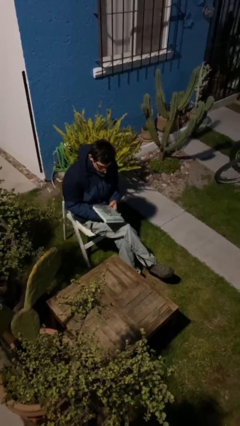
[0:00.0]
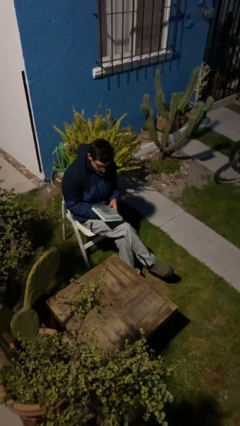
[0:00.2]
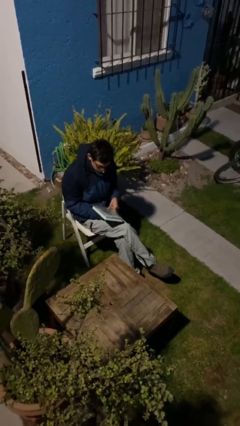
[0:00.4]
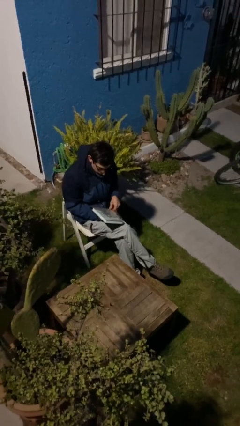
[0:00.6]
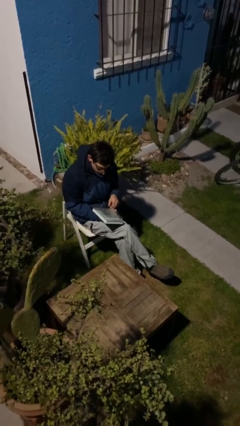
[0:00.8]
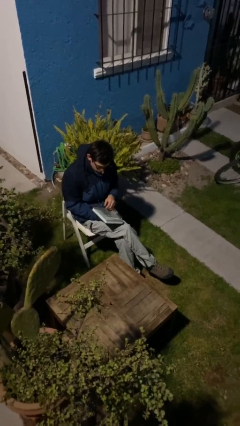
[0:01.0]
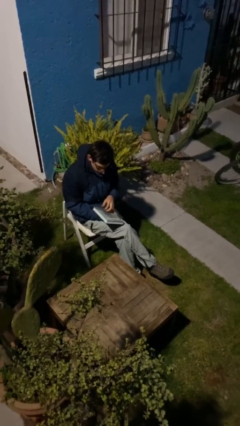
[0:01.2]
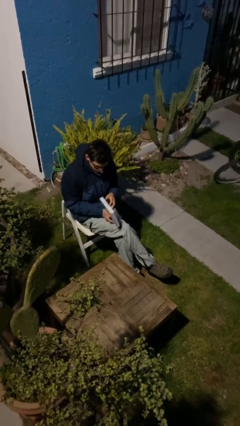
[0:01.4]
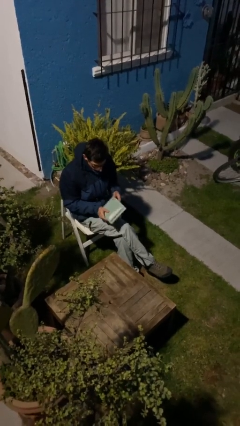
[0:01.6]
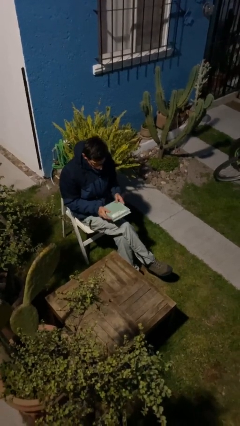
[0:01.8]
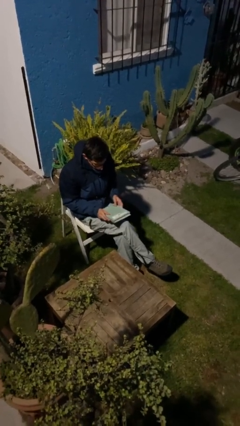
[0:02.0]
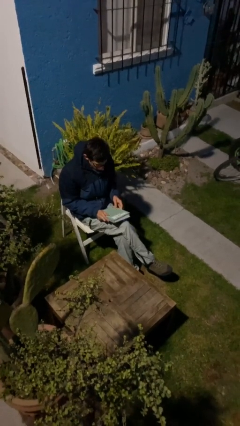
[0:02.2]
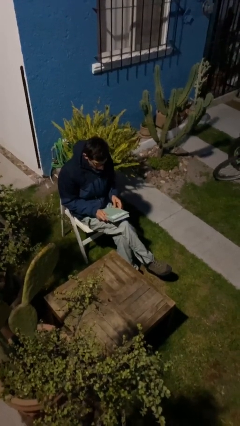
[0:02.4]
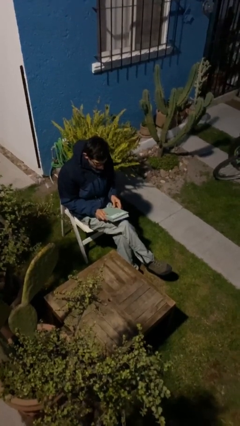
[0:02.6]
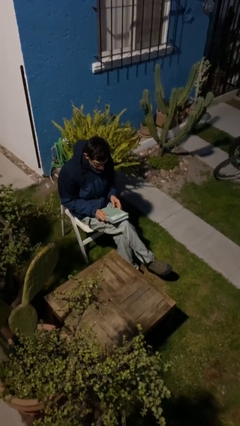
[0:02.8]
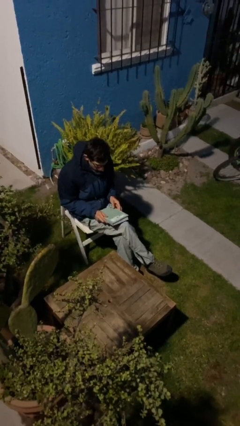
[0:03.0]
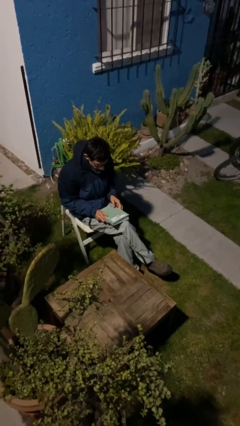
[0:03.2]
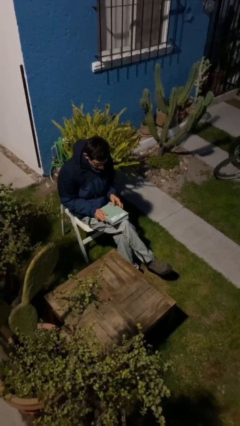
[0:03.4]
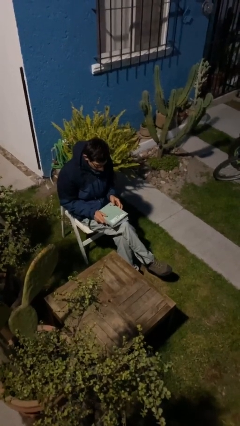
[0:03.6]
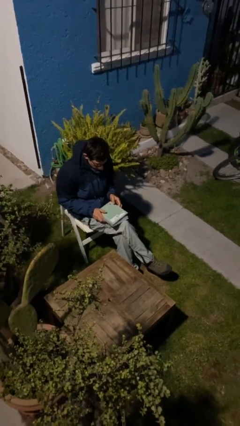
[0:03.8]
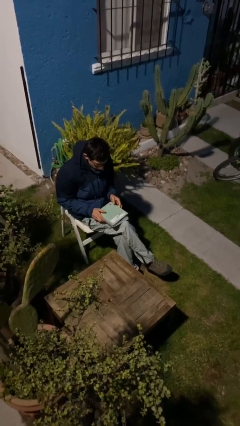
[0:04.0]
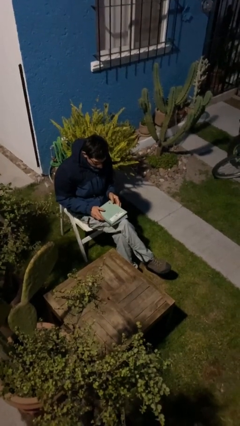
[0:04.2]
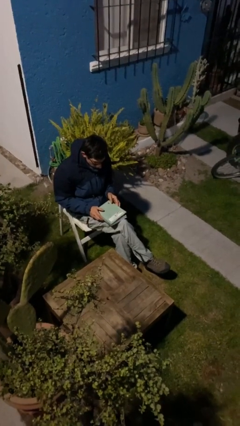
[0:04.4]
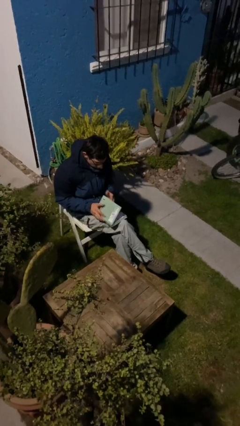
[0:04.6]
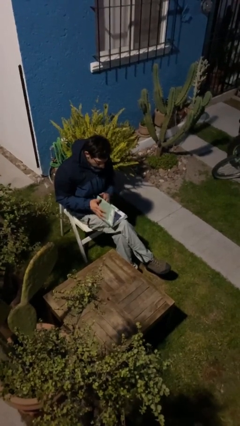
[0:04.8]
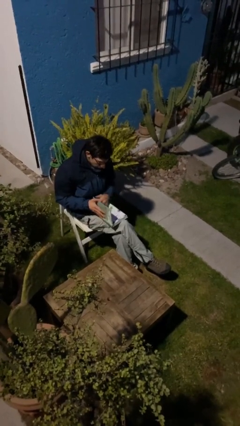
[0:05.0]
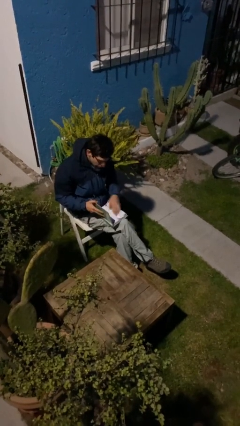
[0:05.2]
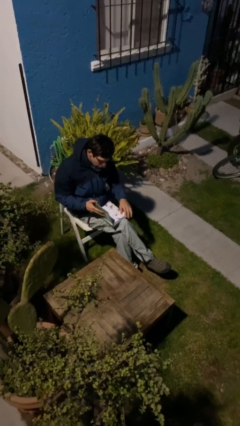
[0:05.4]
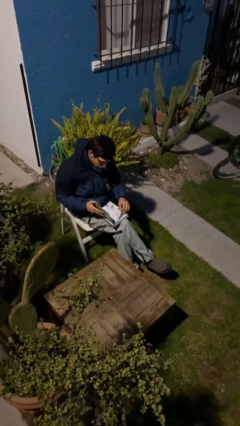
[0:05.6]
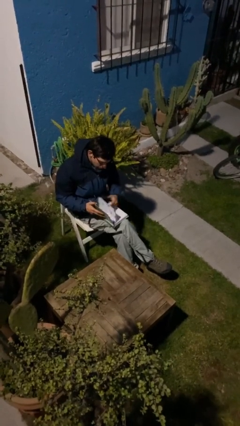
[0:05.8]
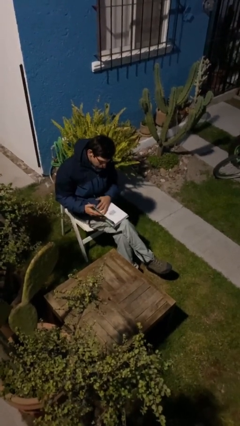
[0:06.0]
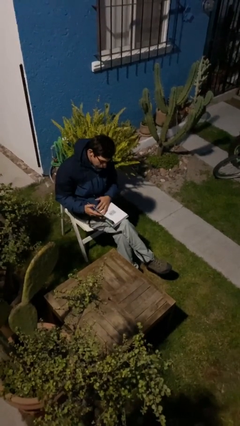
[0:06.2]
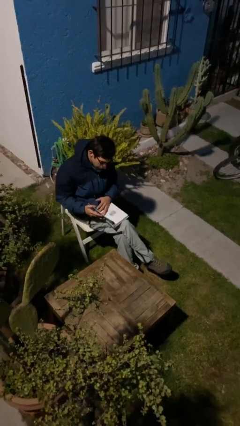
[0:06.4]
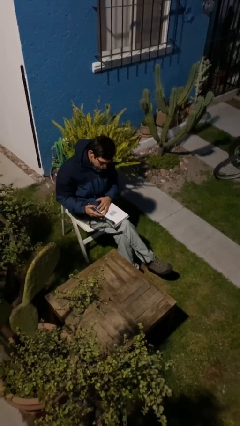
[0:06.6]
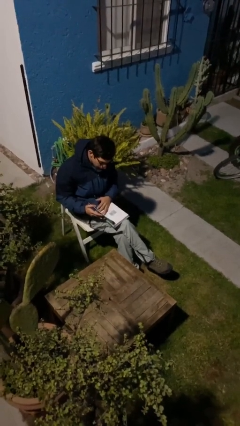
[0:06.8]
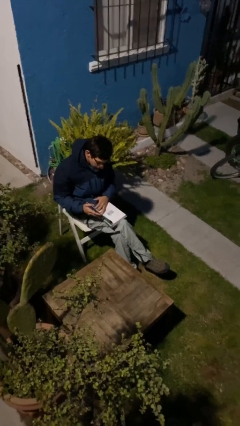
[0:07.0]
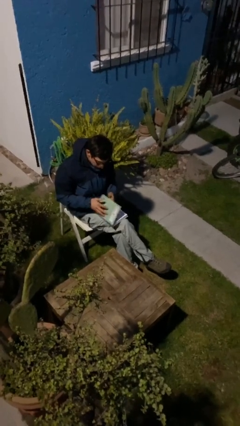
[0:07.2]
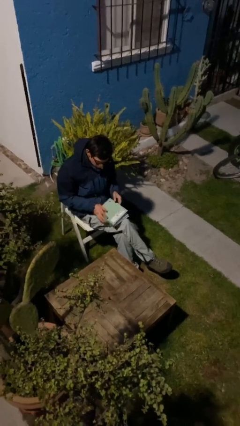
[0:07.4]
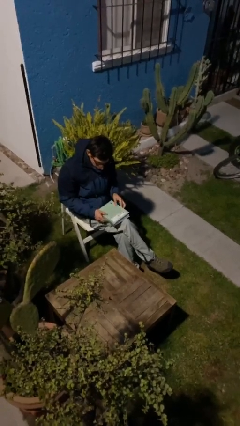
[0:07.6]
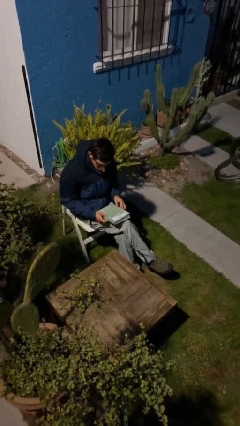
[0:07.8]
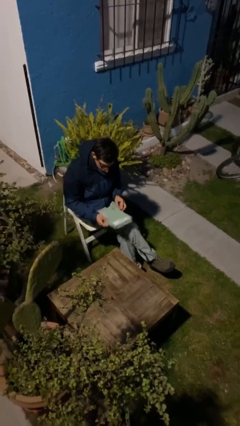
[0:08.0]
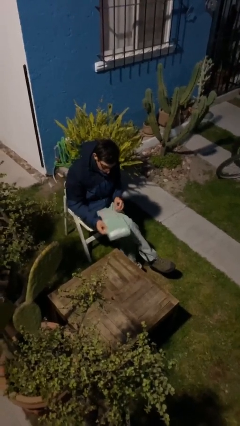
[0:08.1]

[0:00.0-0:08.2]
person reads document

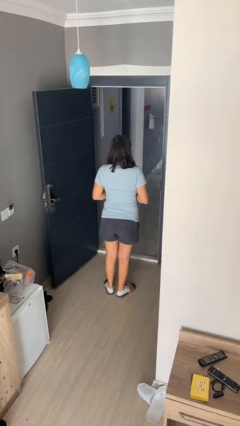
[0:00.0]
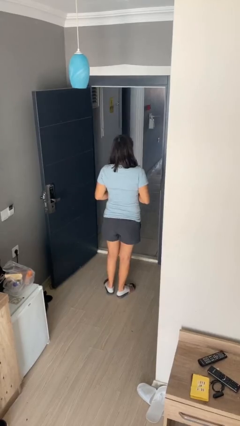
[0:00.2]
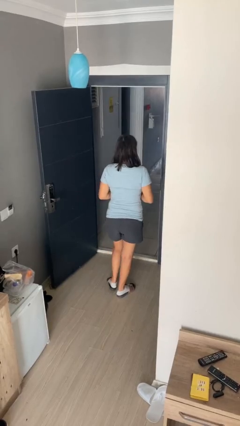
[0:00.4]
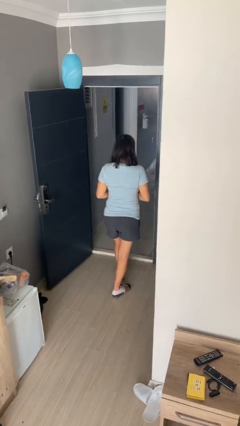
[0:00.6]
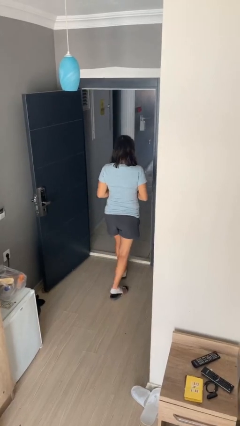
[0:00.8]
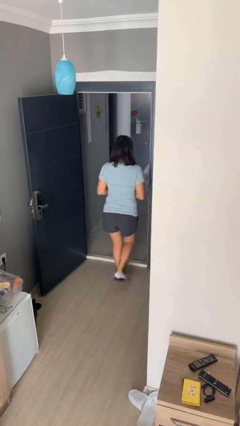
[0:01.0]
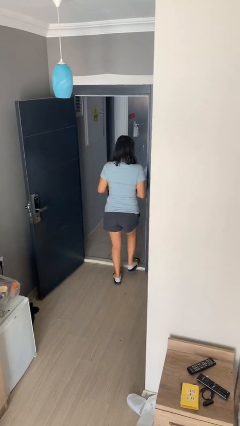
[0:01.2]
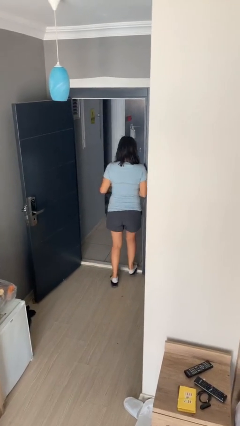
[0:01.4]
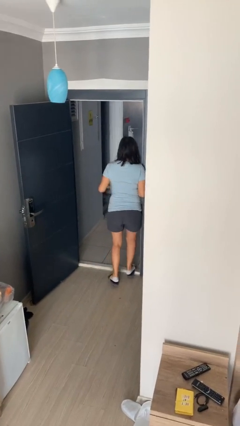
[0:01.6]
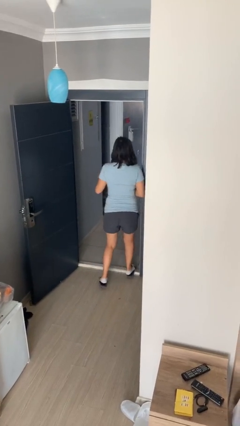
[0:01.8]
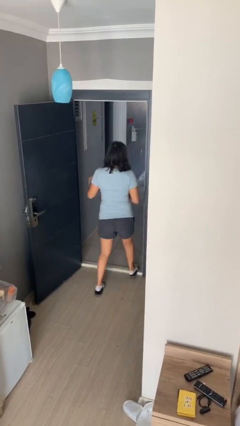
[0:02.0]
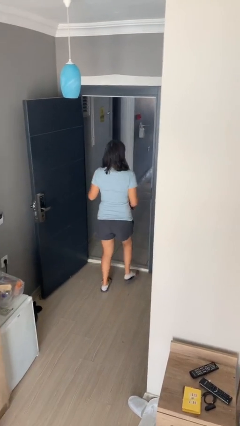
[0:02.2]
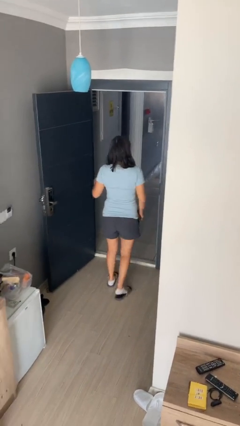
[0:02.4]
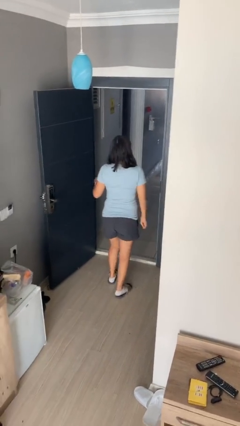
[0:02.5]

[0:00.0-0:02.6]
person bumps into wall

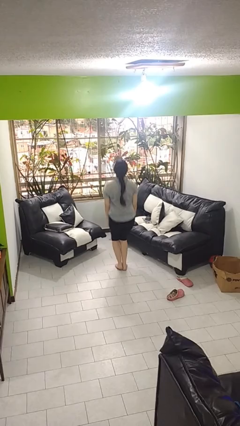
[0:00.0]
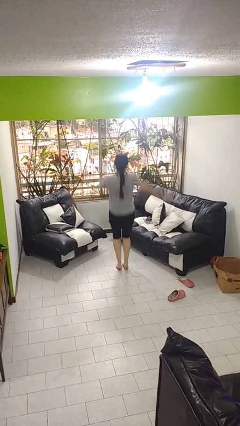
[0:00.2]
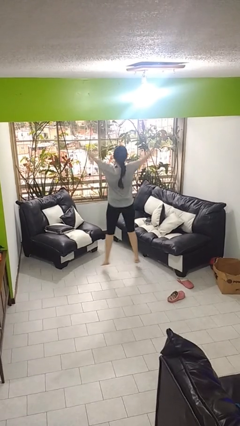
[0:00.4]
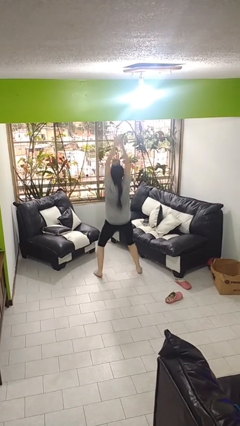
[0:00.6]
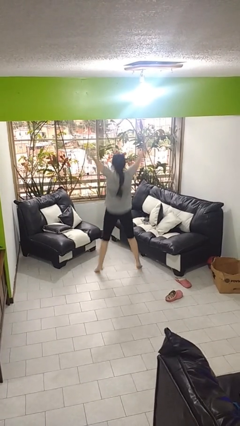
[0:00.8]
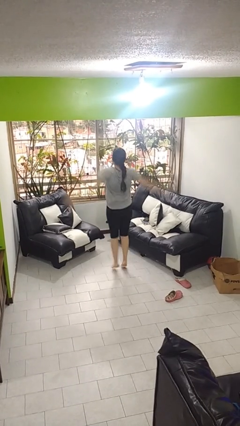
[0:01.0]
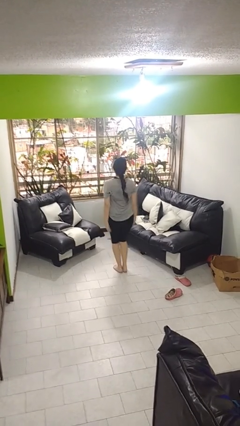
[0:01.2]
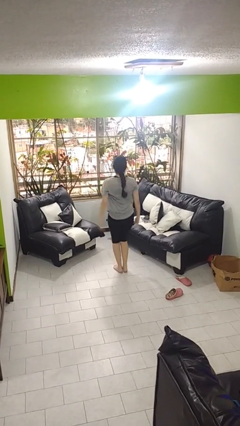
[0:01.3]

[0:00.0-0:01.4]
person exercises with jumping jacks

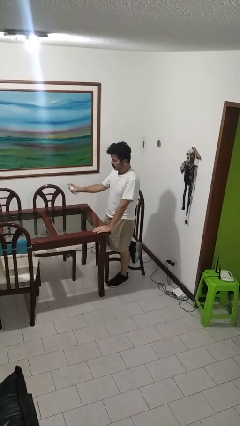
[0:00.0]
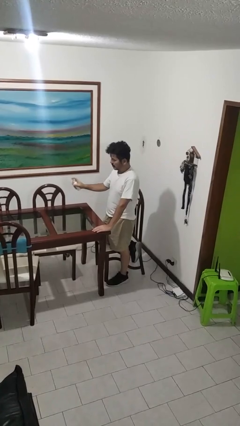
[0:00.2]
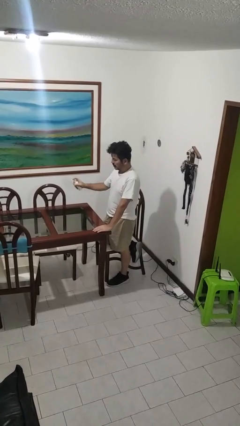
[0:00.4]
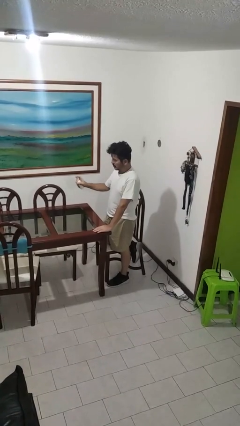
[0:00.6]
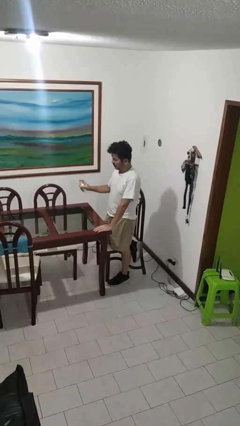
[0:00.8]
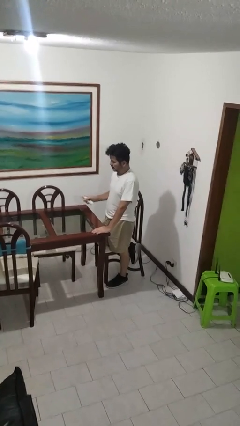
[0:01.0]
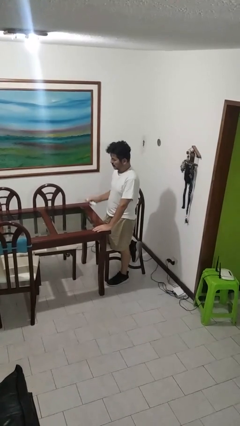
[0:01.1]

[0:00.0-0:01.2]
person sprays from bottle

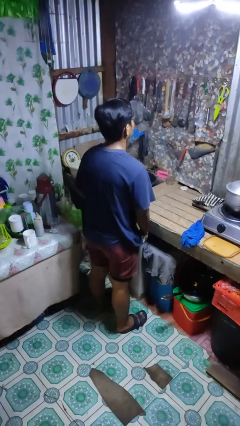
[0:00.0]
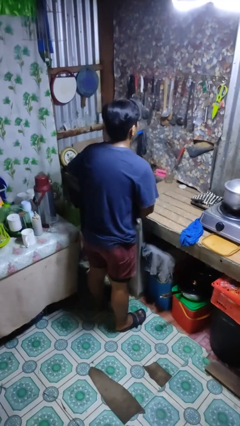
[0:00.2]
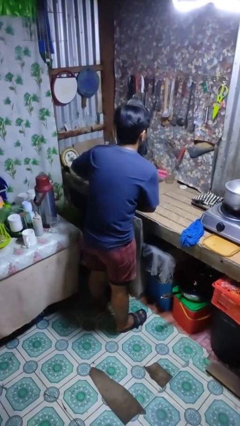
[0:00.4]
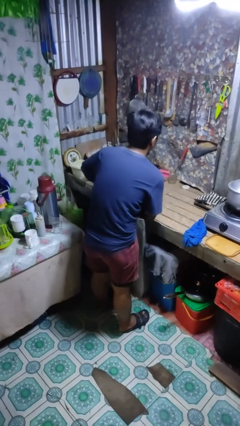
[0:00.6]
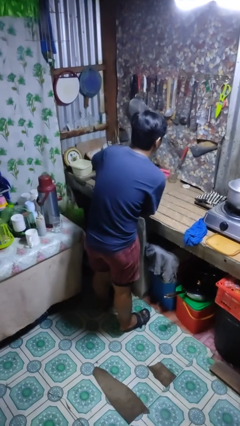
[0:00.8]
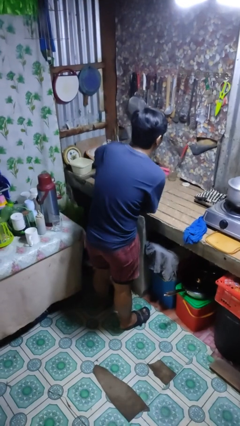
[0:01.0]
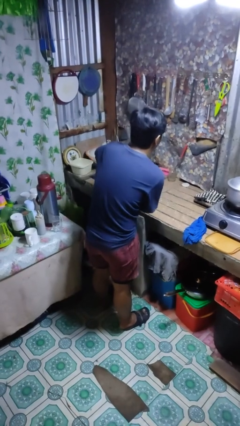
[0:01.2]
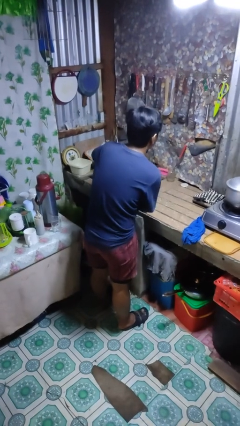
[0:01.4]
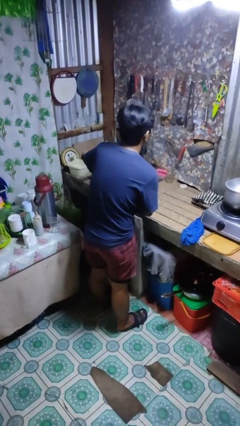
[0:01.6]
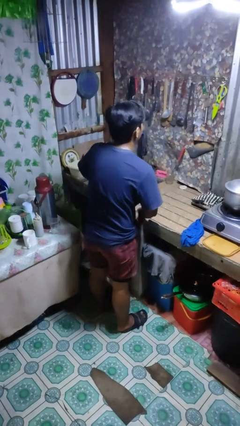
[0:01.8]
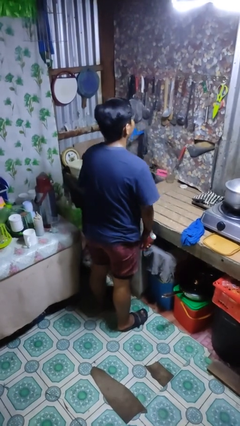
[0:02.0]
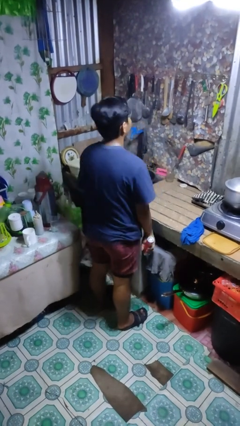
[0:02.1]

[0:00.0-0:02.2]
person applies deodorant

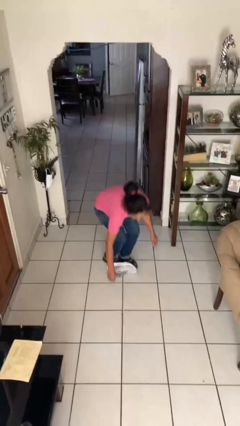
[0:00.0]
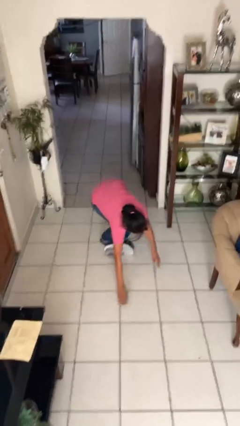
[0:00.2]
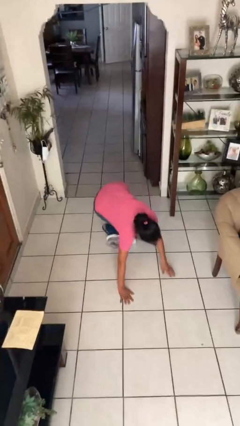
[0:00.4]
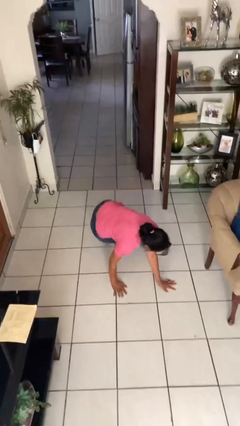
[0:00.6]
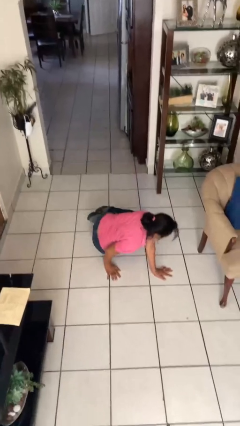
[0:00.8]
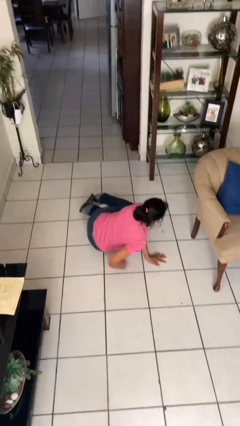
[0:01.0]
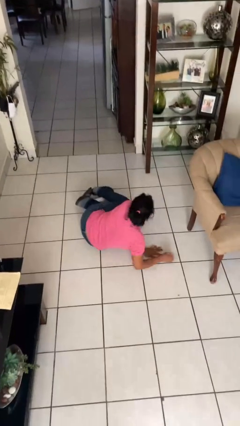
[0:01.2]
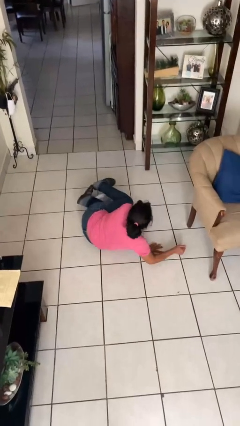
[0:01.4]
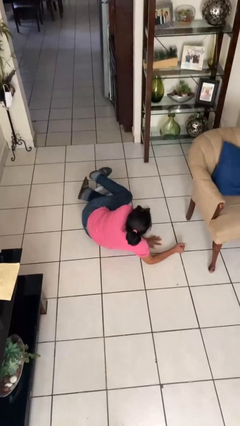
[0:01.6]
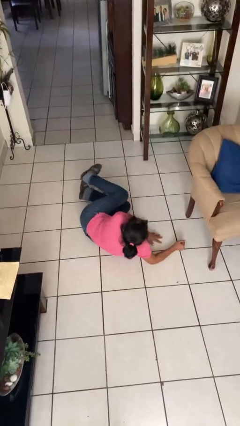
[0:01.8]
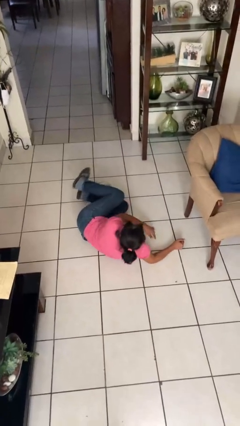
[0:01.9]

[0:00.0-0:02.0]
person lies down on floor
